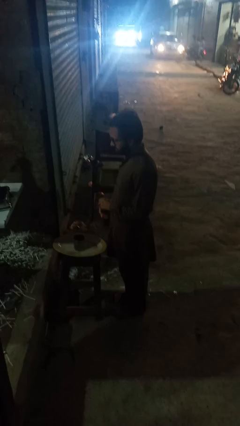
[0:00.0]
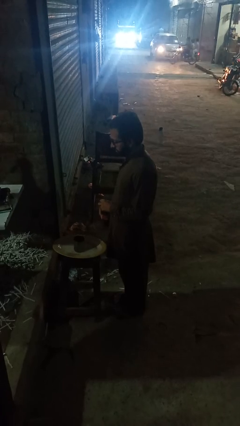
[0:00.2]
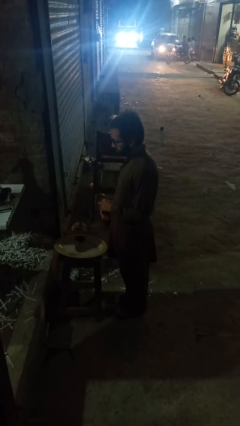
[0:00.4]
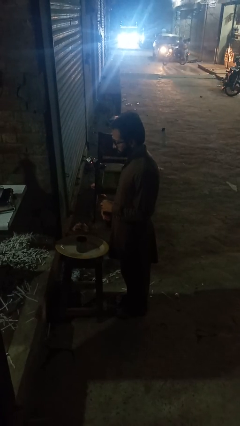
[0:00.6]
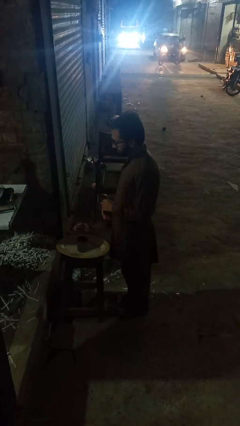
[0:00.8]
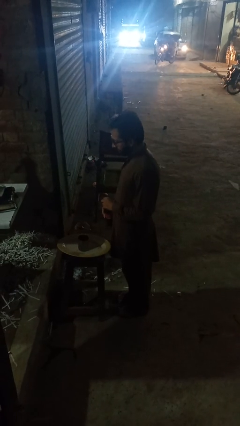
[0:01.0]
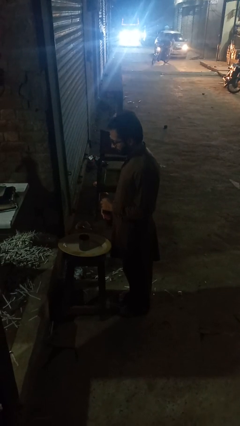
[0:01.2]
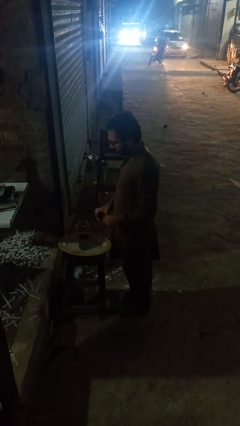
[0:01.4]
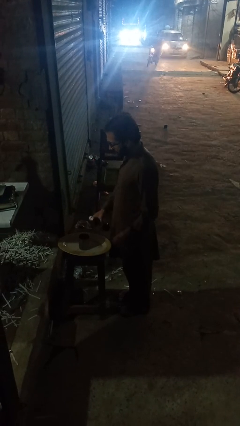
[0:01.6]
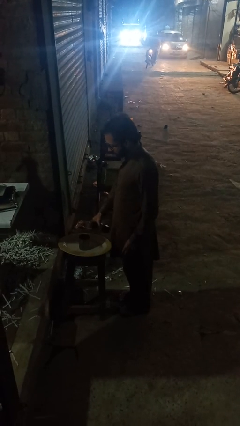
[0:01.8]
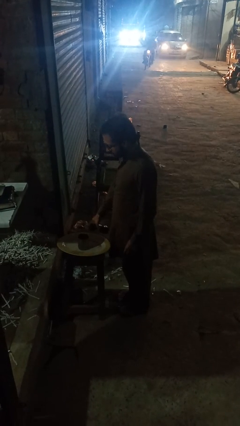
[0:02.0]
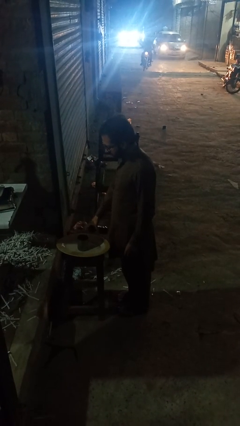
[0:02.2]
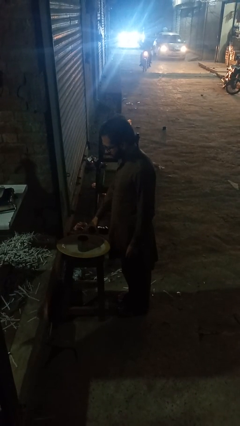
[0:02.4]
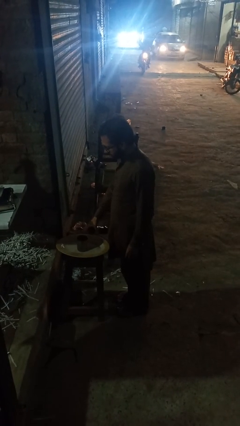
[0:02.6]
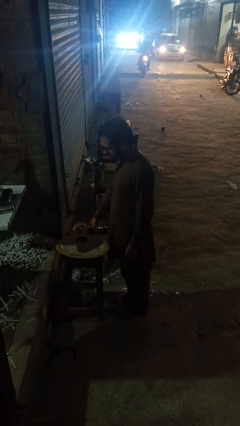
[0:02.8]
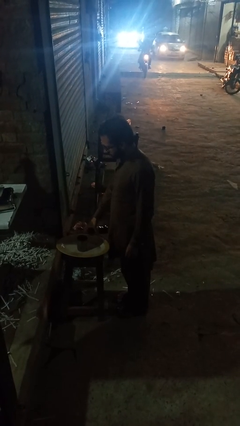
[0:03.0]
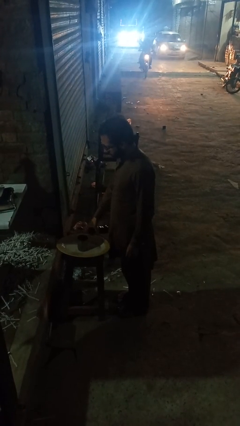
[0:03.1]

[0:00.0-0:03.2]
person pours liquid into cup

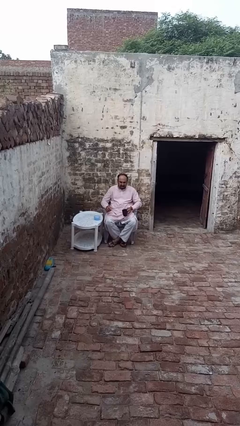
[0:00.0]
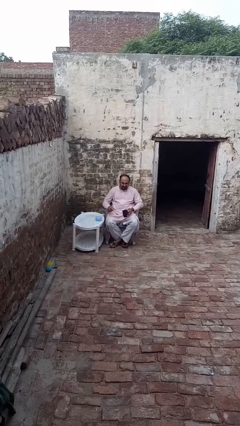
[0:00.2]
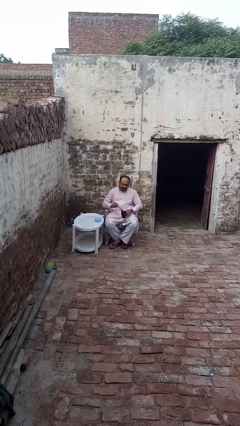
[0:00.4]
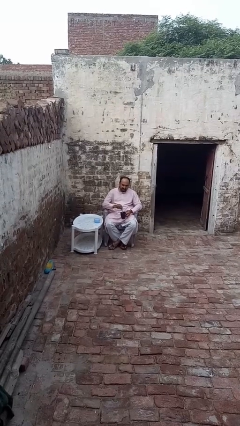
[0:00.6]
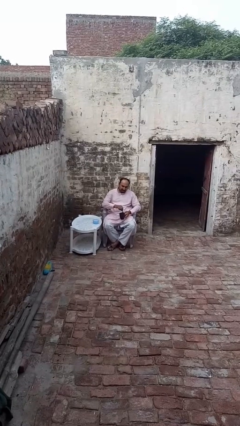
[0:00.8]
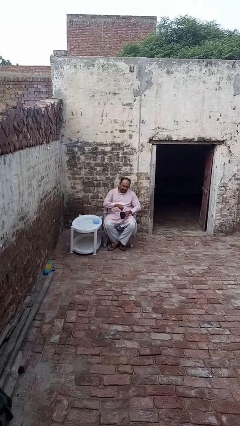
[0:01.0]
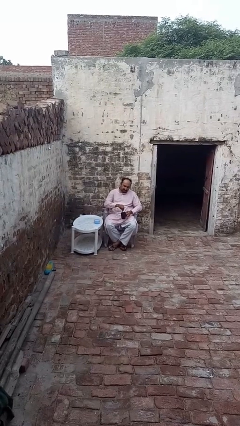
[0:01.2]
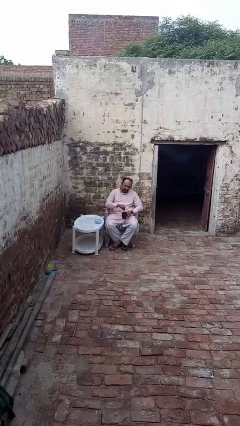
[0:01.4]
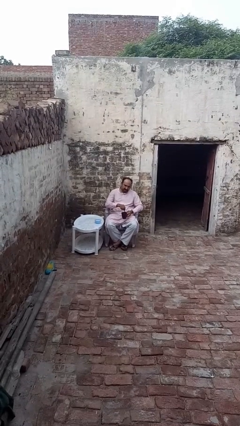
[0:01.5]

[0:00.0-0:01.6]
person stirs mug

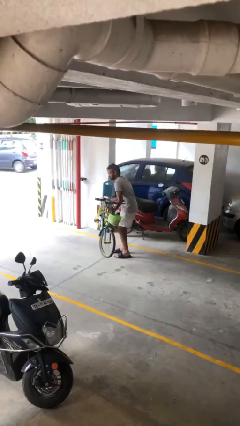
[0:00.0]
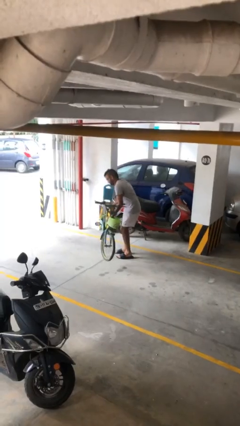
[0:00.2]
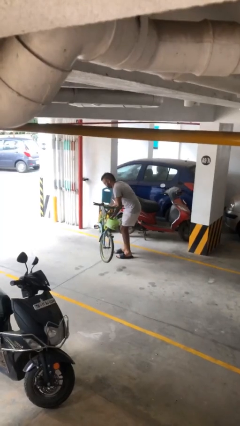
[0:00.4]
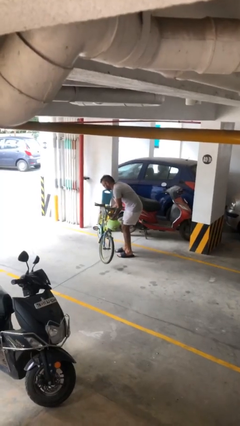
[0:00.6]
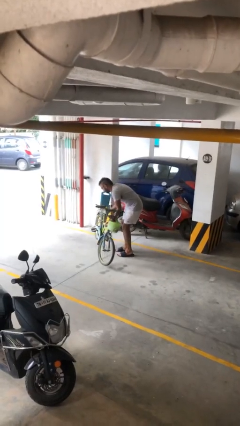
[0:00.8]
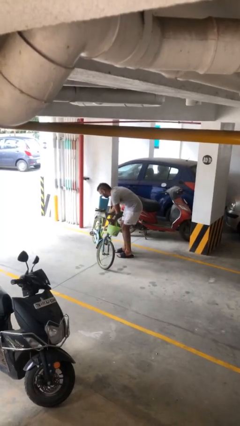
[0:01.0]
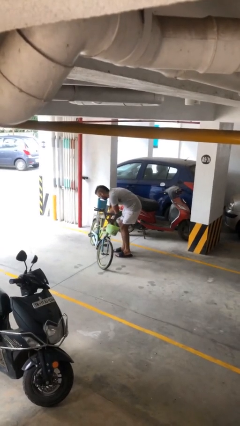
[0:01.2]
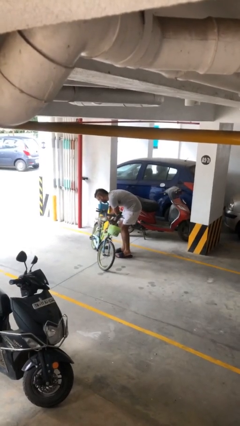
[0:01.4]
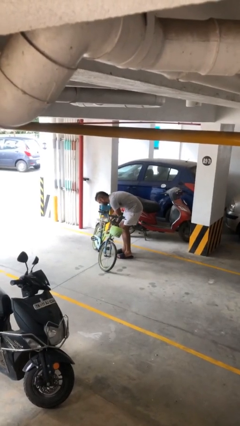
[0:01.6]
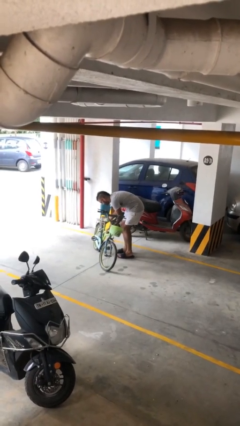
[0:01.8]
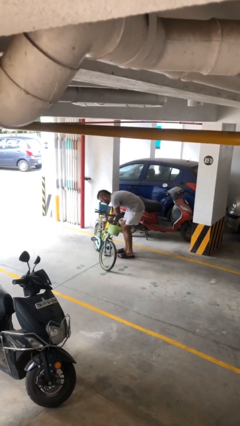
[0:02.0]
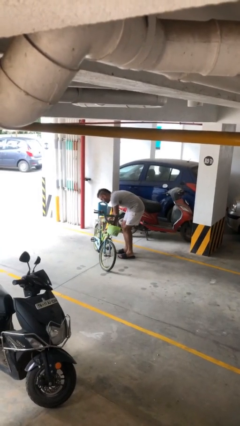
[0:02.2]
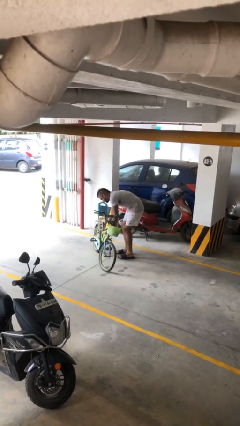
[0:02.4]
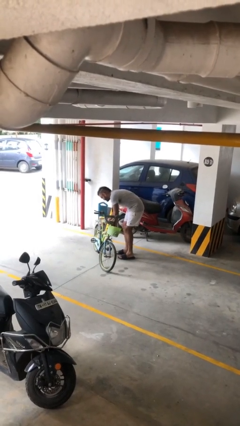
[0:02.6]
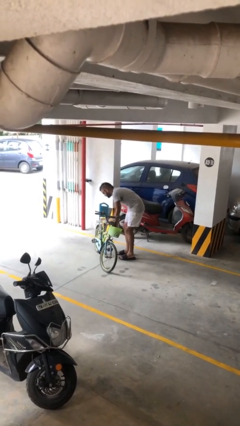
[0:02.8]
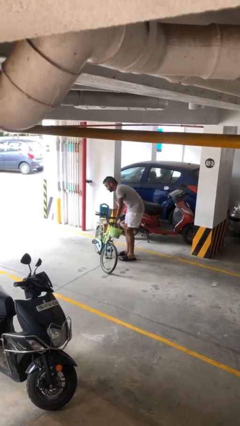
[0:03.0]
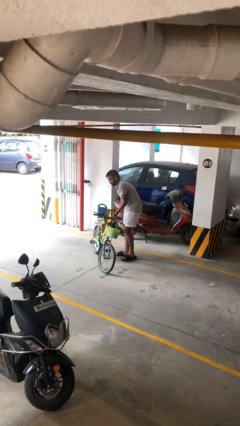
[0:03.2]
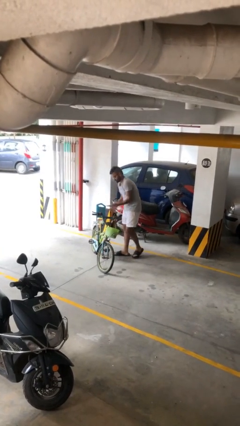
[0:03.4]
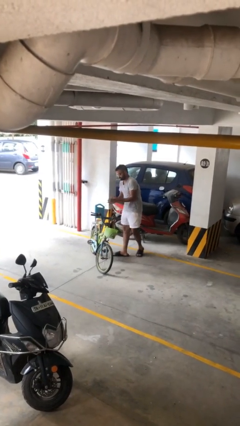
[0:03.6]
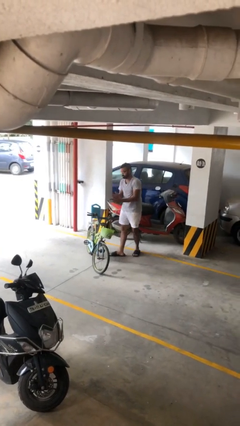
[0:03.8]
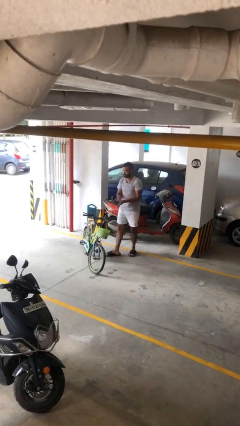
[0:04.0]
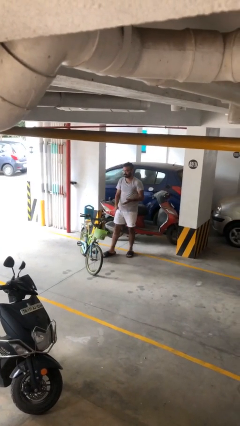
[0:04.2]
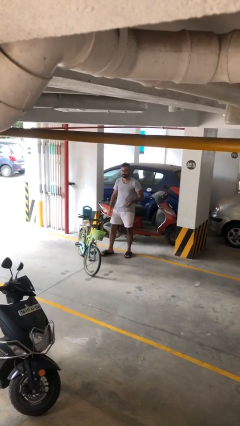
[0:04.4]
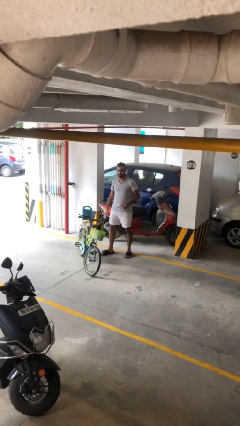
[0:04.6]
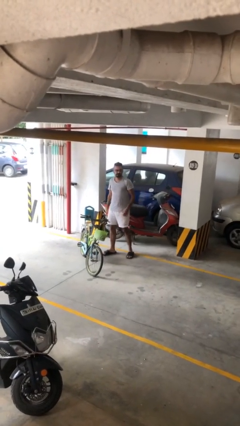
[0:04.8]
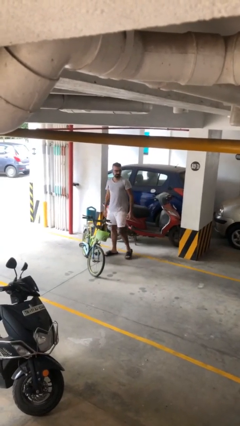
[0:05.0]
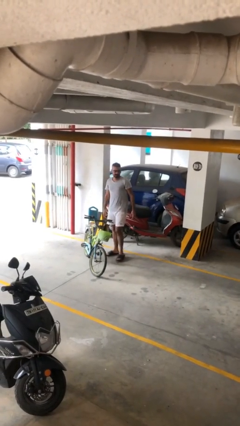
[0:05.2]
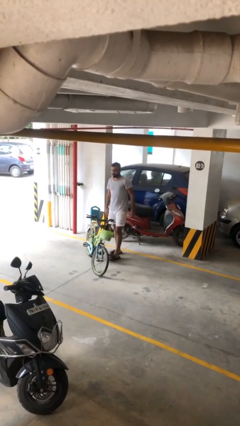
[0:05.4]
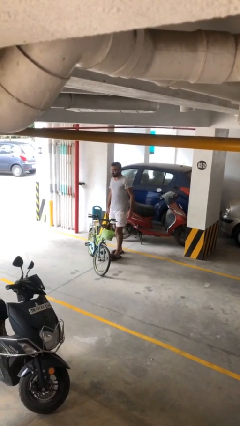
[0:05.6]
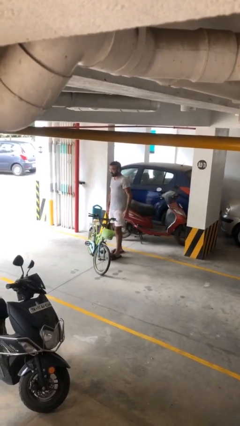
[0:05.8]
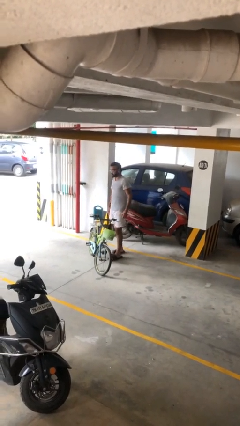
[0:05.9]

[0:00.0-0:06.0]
person puts down object on floor

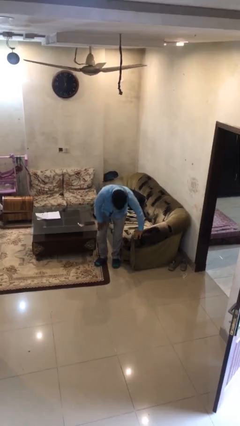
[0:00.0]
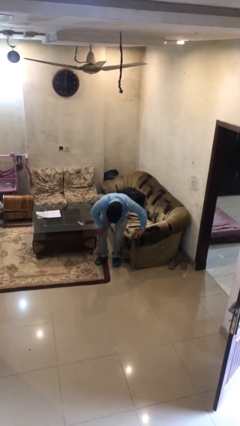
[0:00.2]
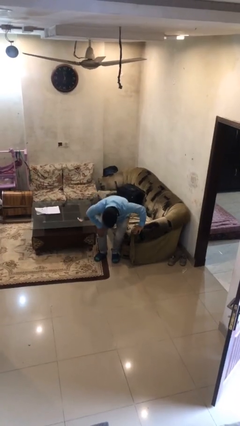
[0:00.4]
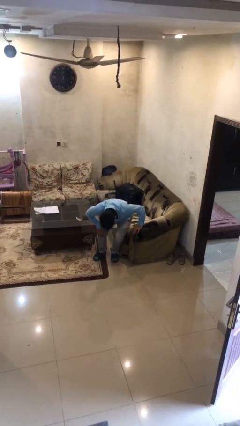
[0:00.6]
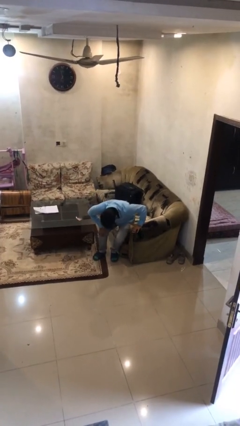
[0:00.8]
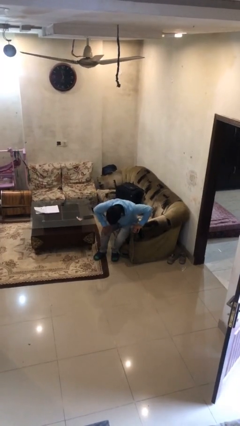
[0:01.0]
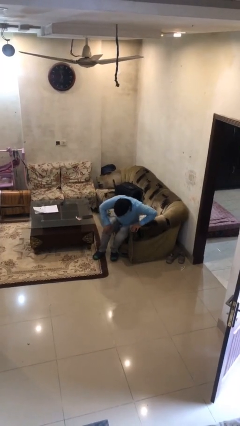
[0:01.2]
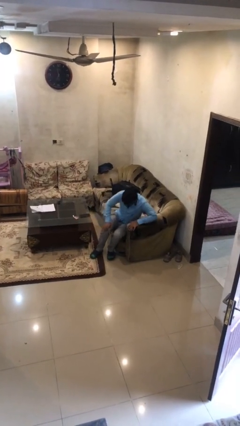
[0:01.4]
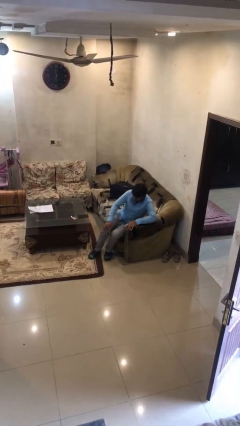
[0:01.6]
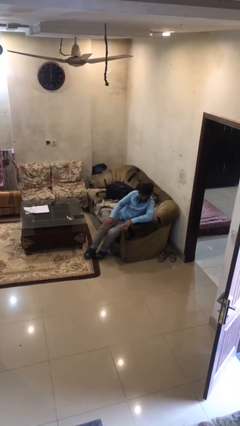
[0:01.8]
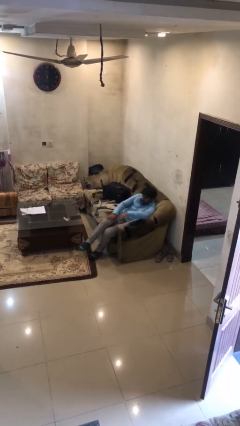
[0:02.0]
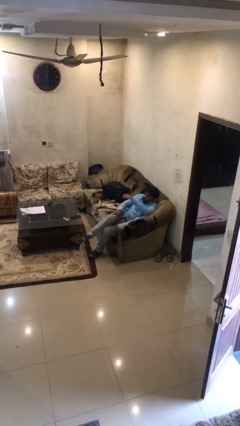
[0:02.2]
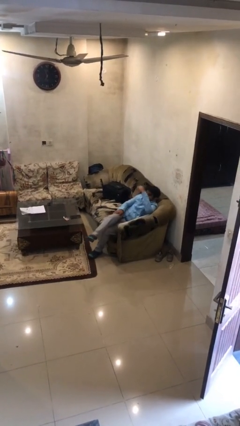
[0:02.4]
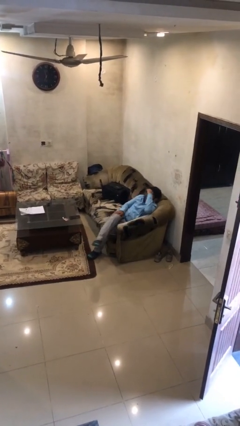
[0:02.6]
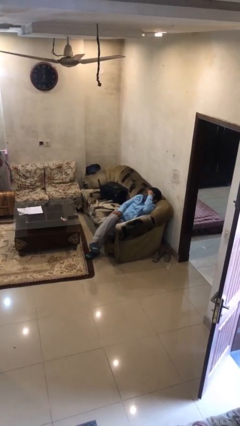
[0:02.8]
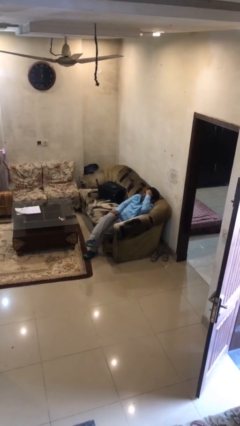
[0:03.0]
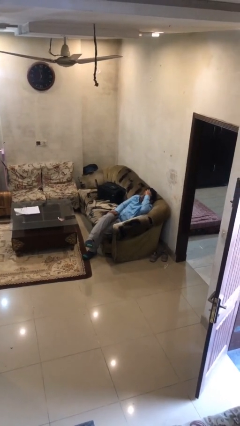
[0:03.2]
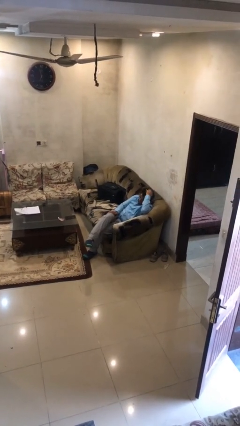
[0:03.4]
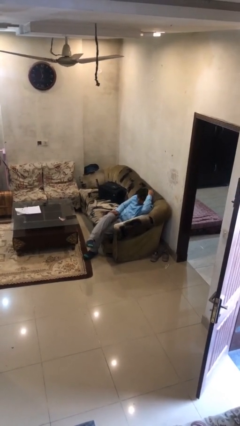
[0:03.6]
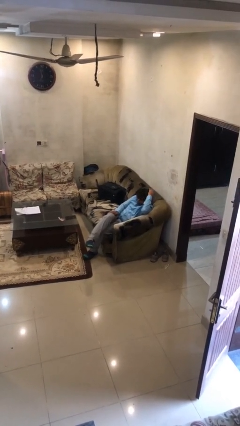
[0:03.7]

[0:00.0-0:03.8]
person sits down

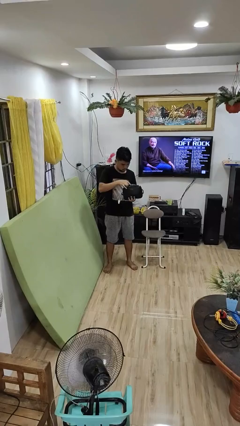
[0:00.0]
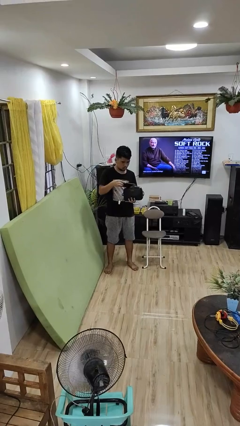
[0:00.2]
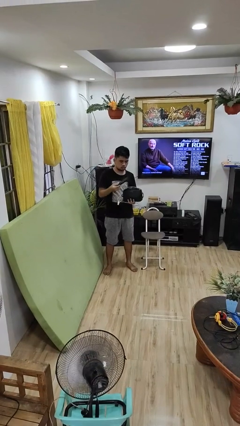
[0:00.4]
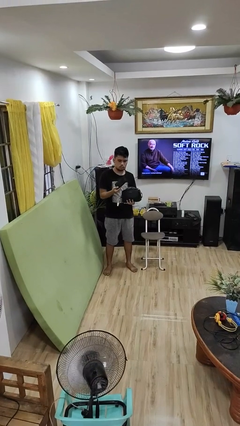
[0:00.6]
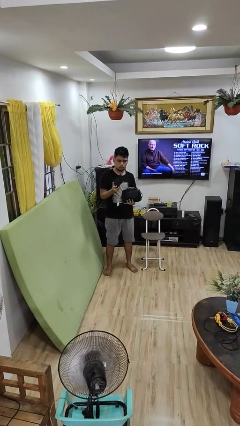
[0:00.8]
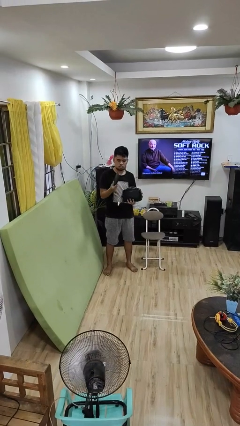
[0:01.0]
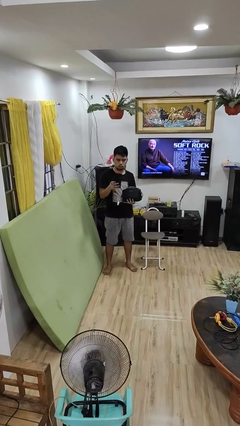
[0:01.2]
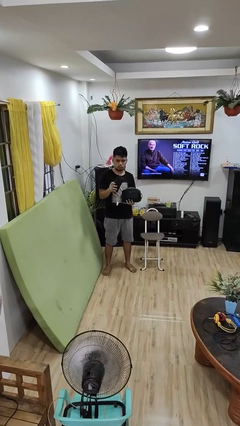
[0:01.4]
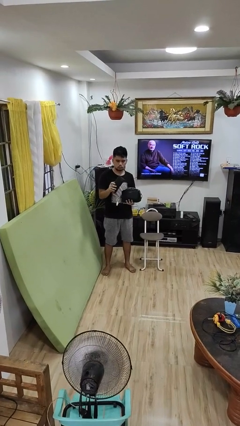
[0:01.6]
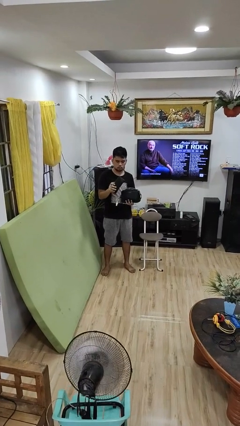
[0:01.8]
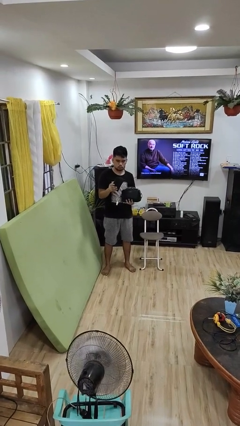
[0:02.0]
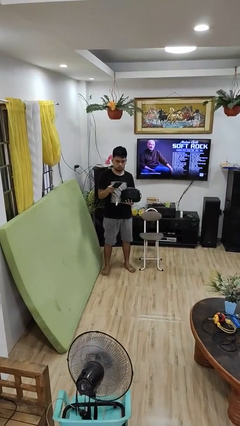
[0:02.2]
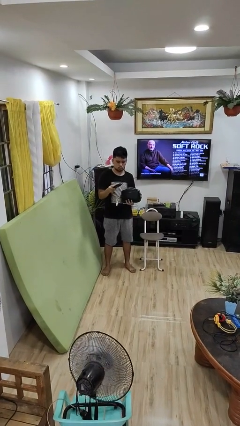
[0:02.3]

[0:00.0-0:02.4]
person takes object from purse

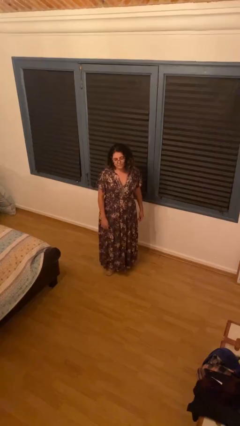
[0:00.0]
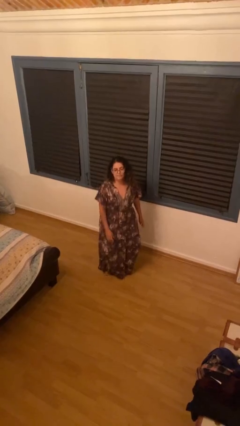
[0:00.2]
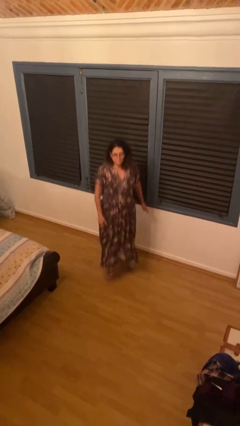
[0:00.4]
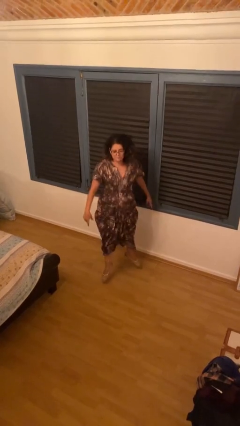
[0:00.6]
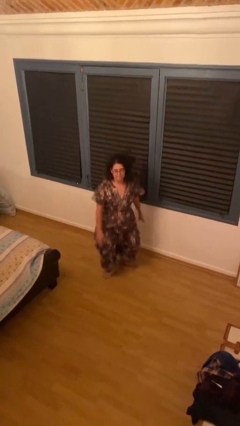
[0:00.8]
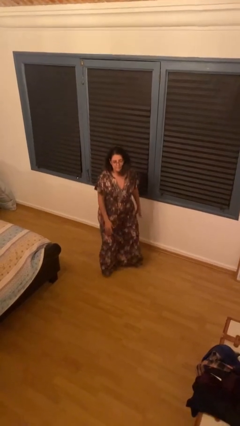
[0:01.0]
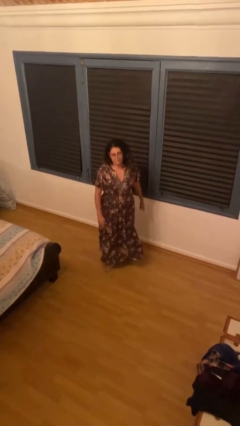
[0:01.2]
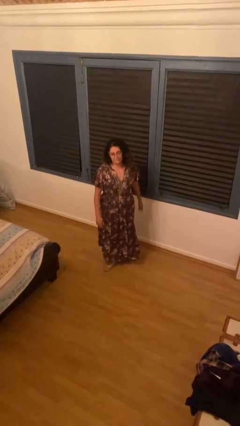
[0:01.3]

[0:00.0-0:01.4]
person jumps
